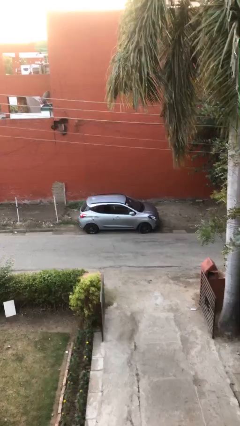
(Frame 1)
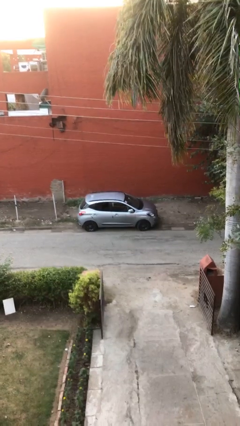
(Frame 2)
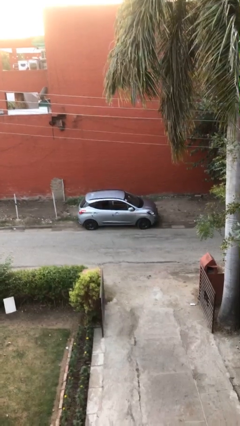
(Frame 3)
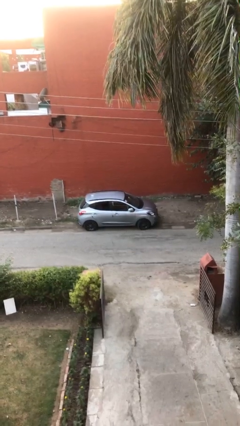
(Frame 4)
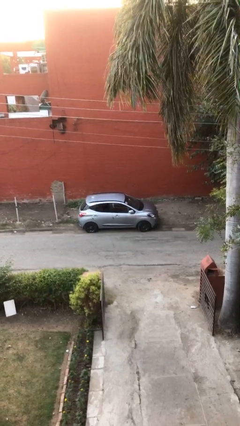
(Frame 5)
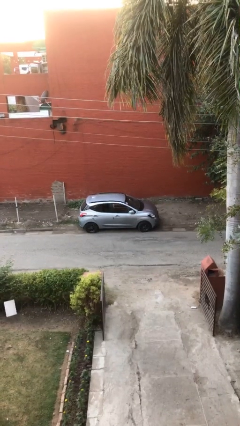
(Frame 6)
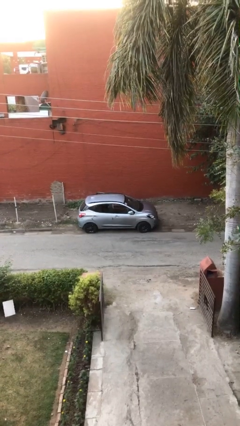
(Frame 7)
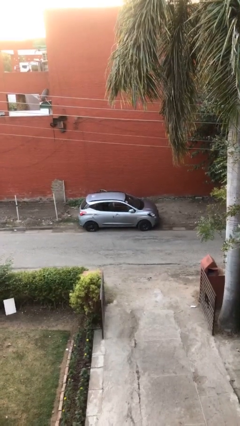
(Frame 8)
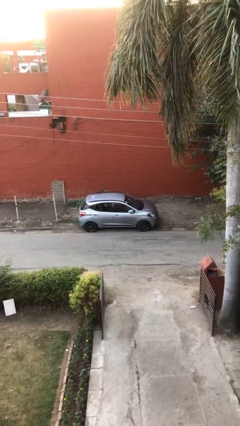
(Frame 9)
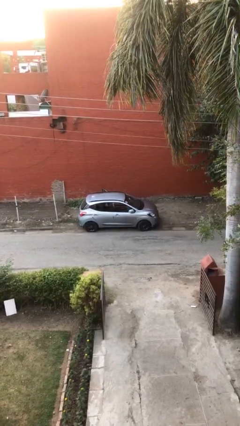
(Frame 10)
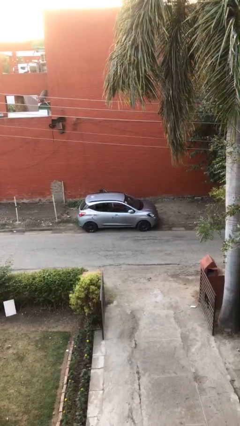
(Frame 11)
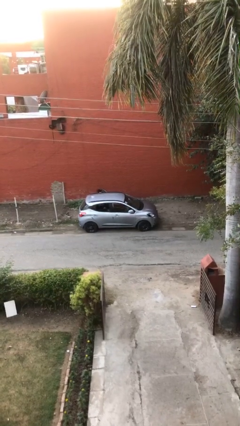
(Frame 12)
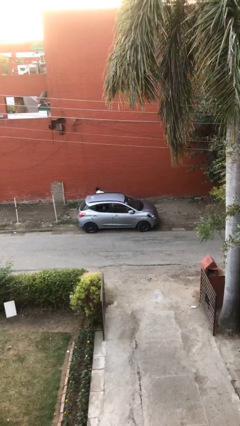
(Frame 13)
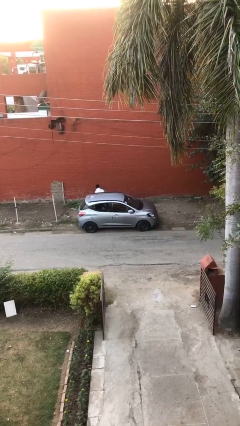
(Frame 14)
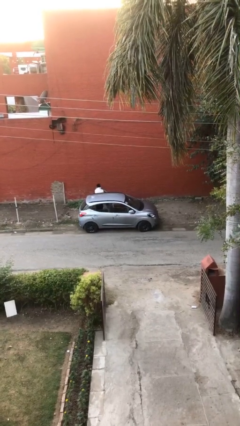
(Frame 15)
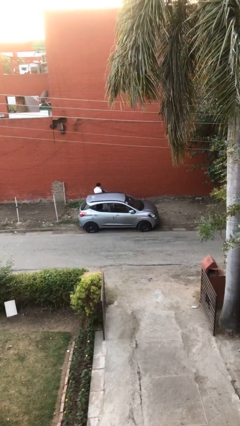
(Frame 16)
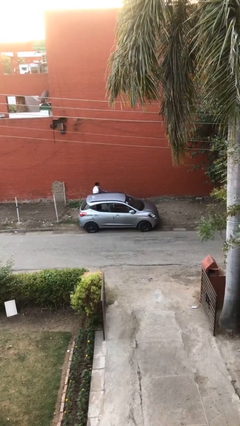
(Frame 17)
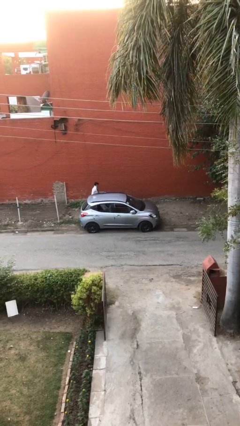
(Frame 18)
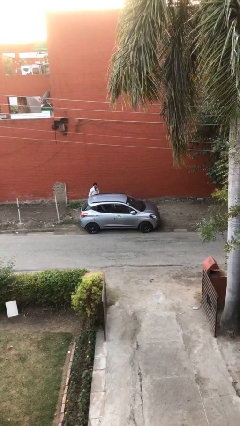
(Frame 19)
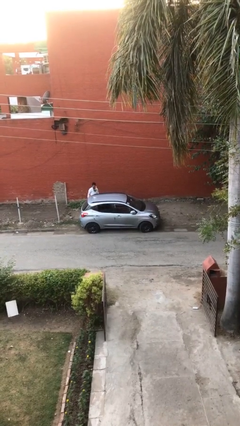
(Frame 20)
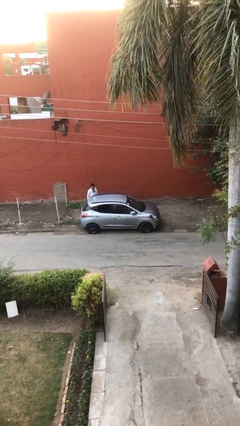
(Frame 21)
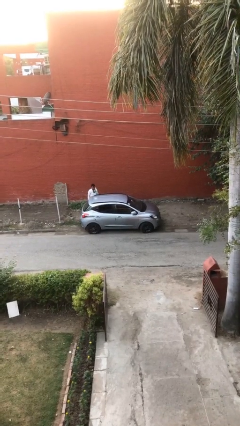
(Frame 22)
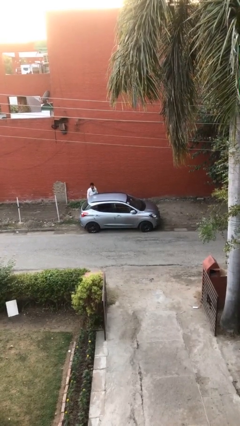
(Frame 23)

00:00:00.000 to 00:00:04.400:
car drops off person

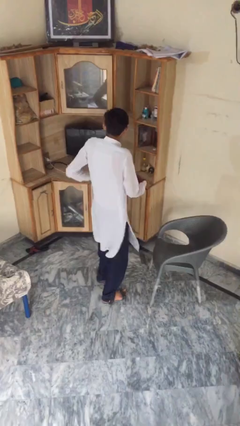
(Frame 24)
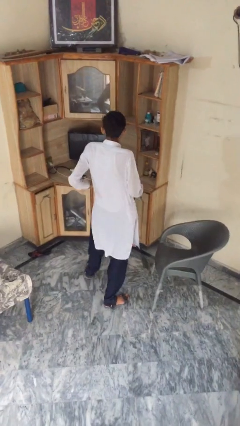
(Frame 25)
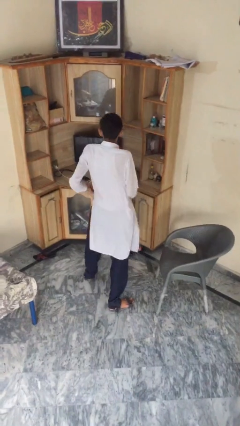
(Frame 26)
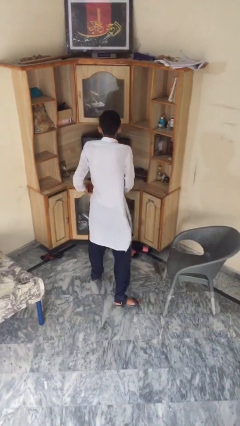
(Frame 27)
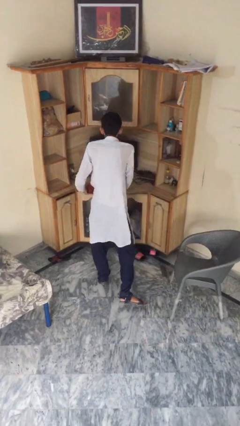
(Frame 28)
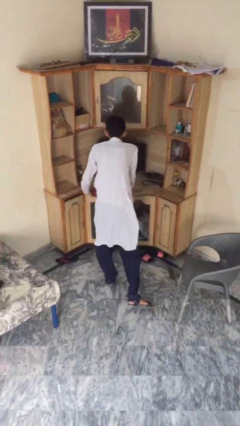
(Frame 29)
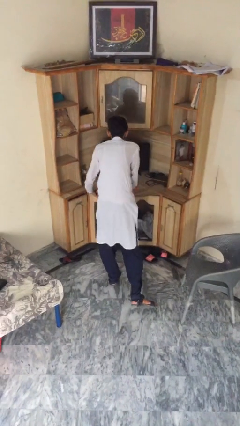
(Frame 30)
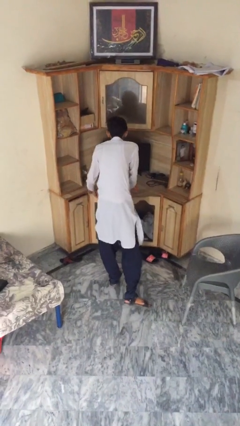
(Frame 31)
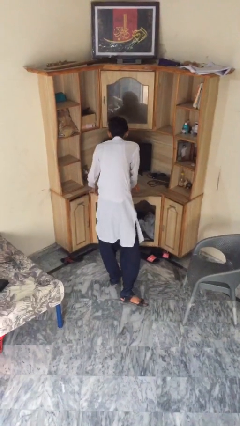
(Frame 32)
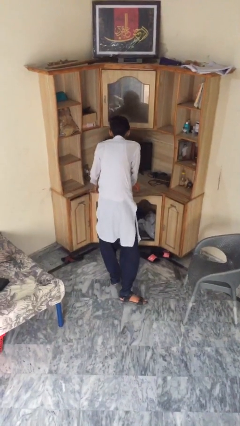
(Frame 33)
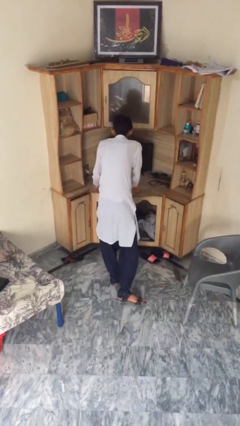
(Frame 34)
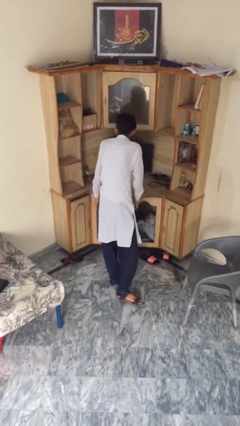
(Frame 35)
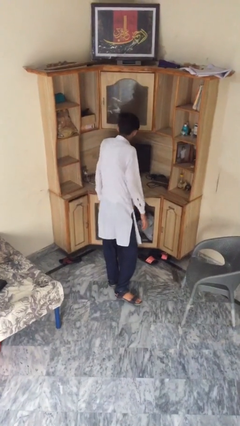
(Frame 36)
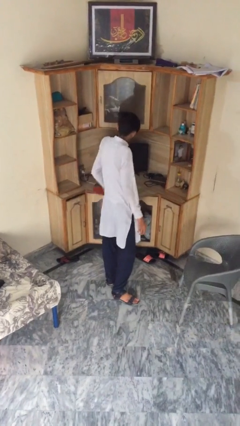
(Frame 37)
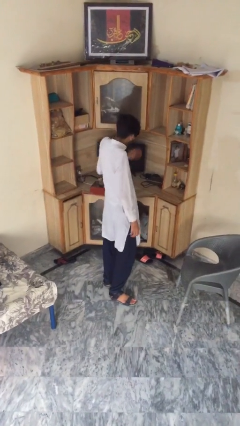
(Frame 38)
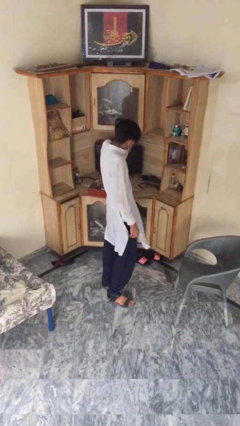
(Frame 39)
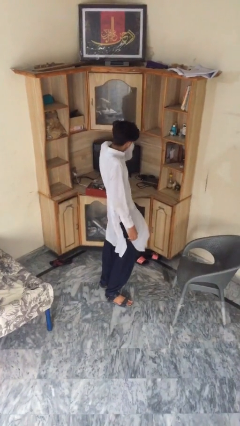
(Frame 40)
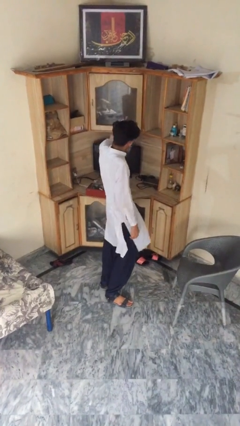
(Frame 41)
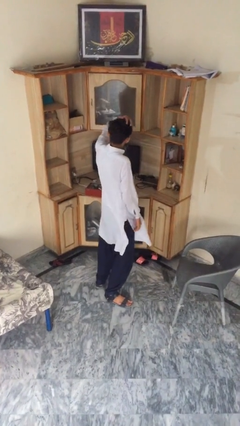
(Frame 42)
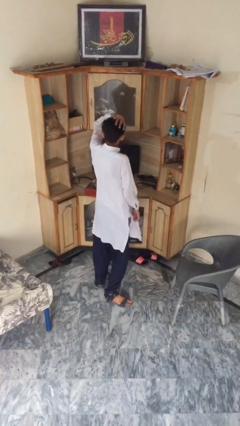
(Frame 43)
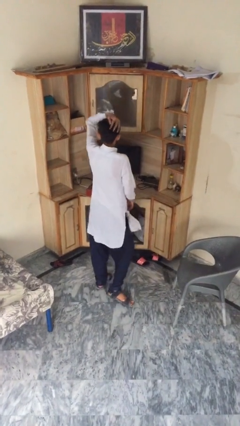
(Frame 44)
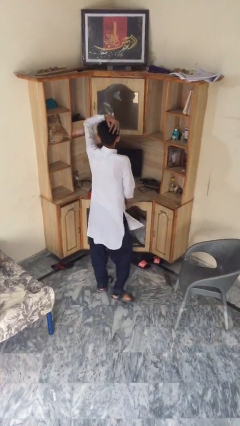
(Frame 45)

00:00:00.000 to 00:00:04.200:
person puts down object on table

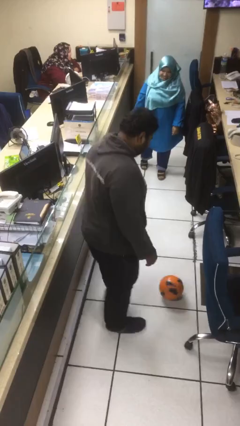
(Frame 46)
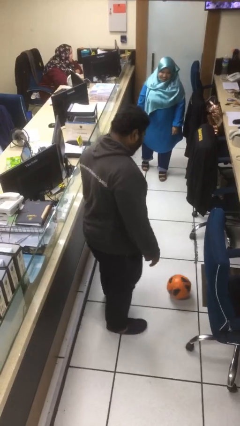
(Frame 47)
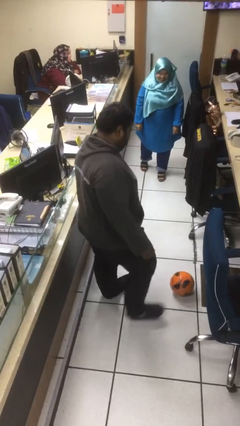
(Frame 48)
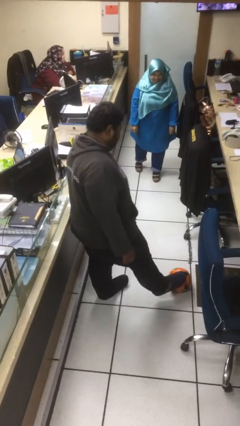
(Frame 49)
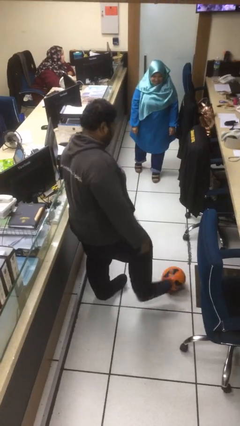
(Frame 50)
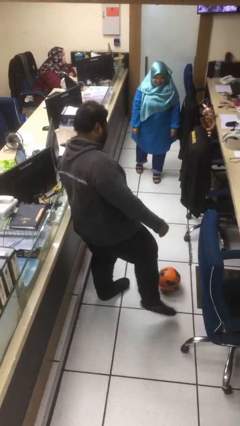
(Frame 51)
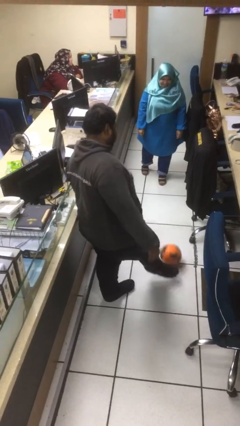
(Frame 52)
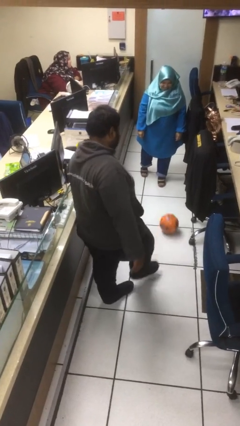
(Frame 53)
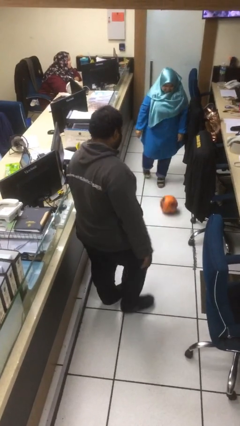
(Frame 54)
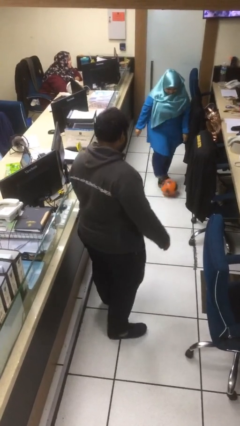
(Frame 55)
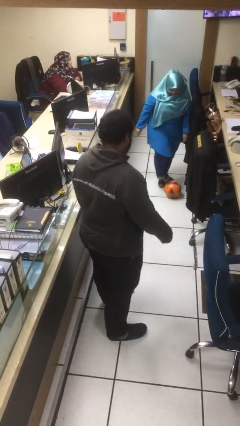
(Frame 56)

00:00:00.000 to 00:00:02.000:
person kicks object to person

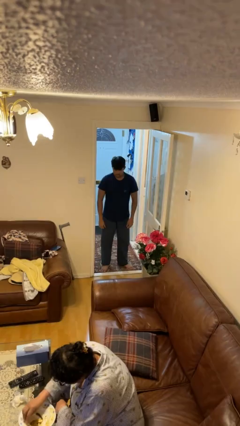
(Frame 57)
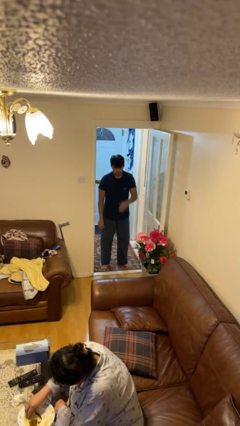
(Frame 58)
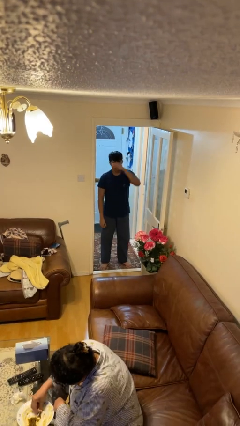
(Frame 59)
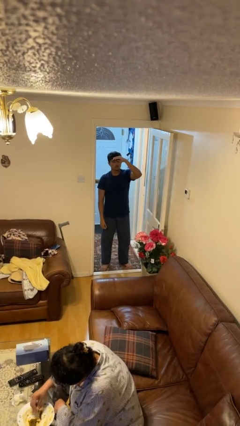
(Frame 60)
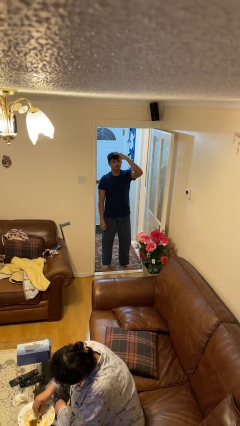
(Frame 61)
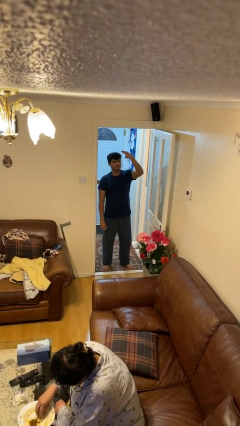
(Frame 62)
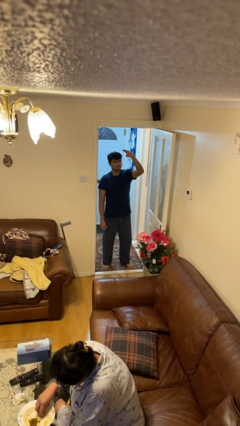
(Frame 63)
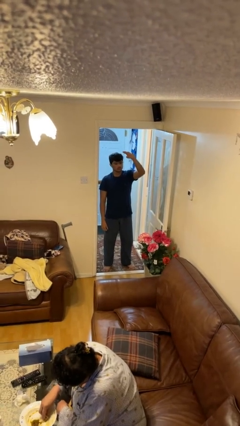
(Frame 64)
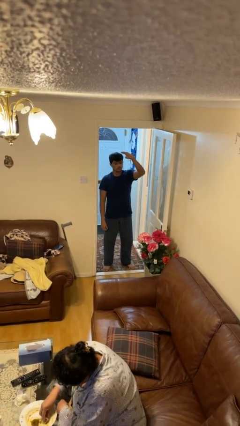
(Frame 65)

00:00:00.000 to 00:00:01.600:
person salutes

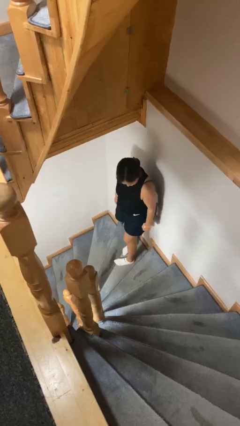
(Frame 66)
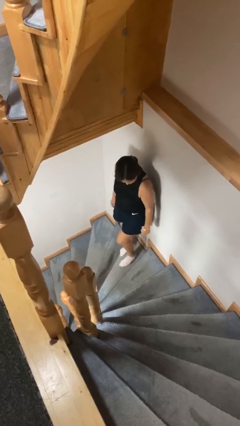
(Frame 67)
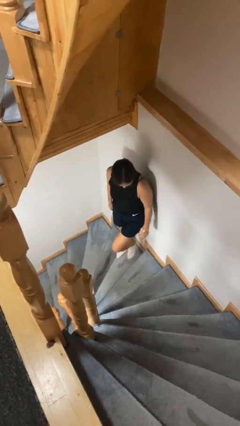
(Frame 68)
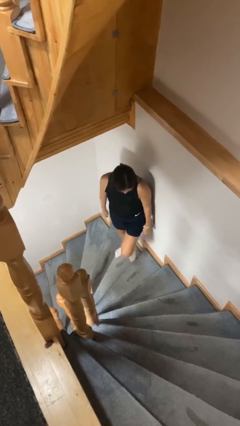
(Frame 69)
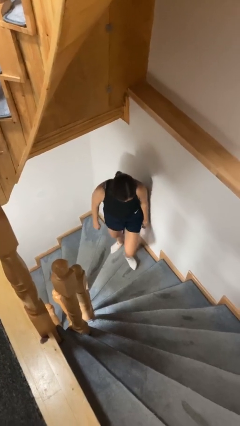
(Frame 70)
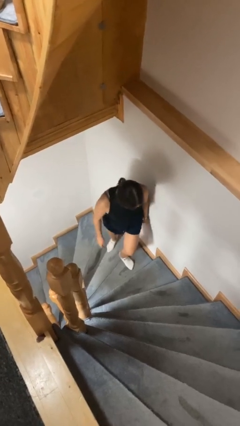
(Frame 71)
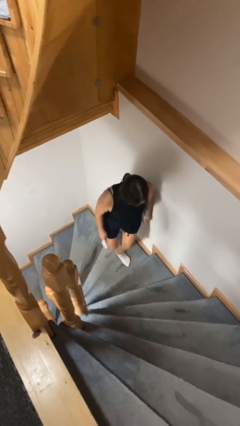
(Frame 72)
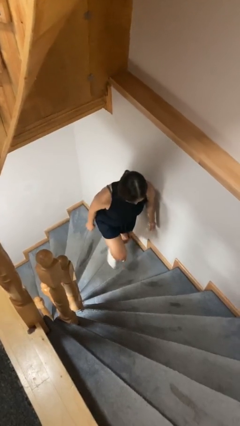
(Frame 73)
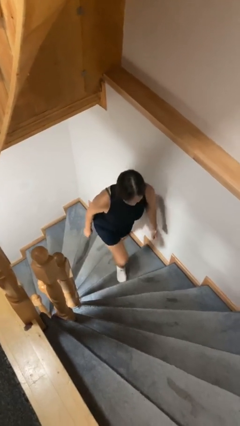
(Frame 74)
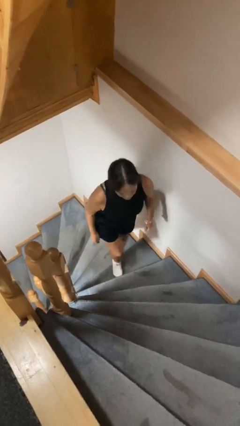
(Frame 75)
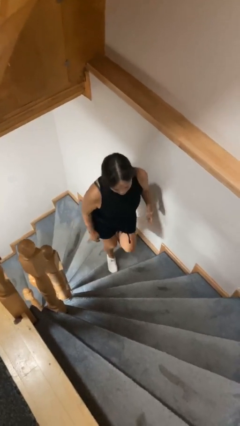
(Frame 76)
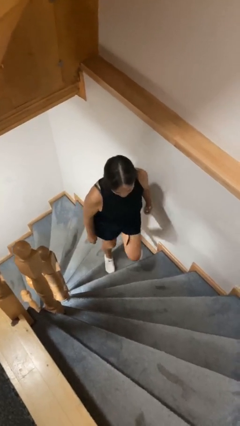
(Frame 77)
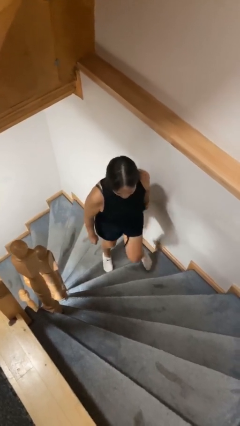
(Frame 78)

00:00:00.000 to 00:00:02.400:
person climbs up stairs

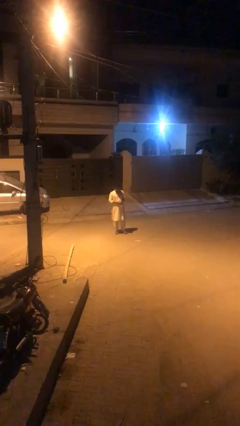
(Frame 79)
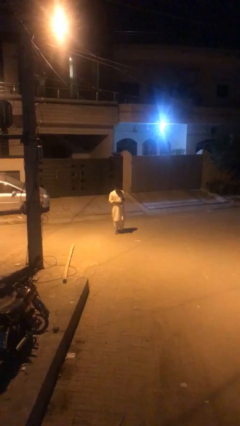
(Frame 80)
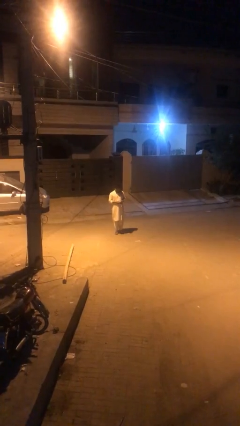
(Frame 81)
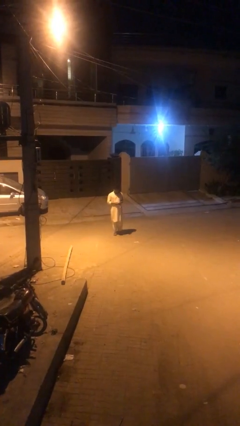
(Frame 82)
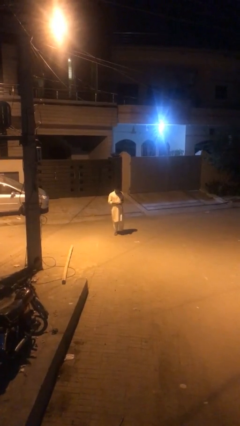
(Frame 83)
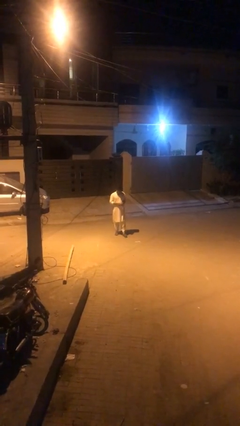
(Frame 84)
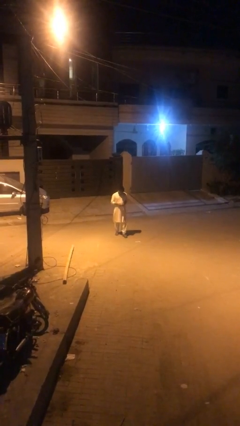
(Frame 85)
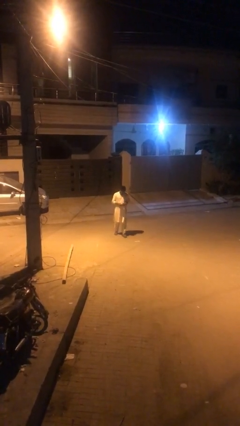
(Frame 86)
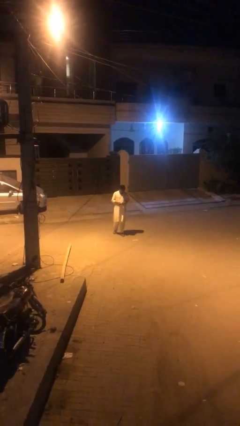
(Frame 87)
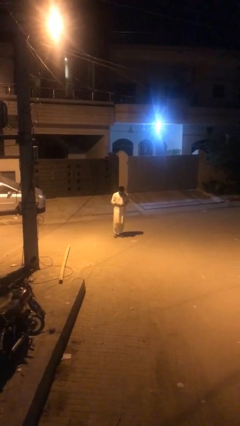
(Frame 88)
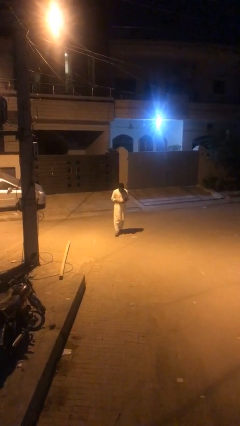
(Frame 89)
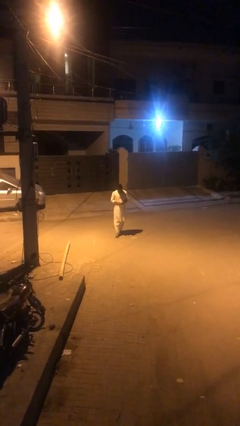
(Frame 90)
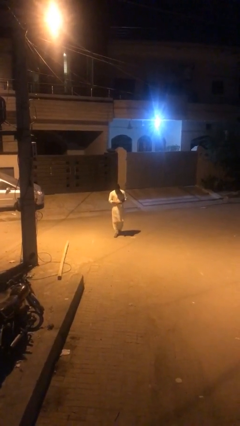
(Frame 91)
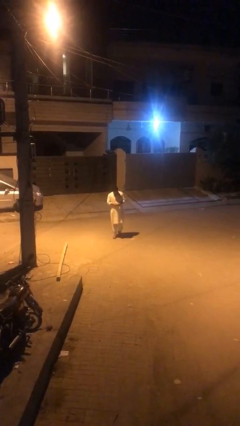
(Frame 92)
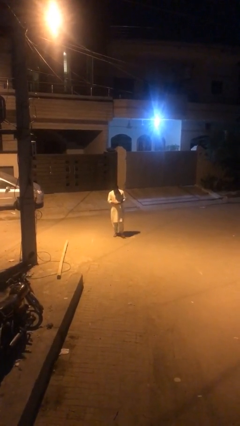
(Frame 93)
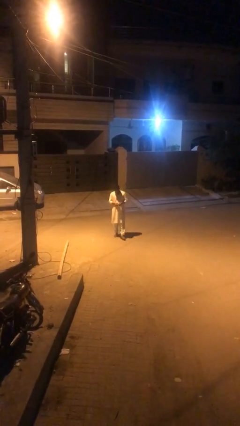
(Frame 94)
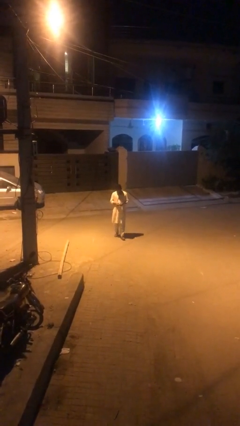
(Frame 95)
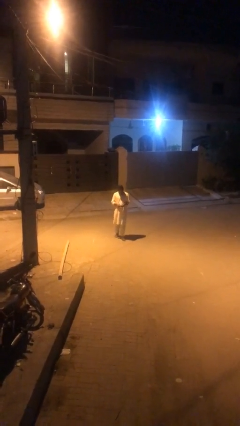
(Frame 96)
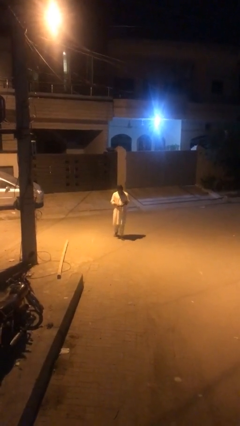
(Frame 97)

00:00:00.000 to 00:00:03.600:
person texts on phone
